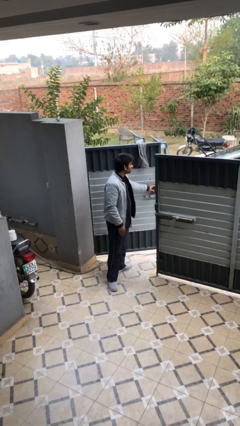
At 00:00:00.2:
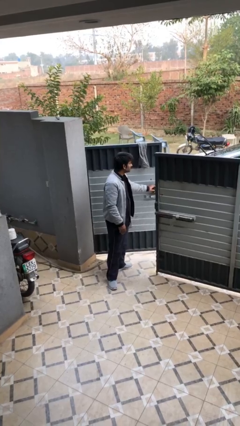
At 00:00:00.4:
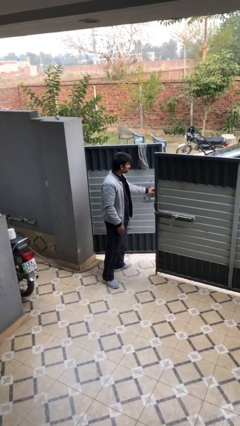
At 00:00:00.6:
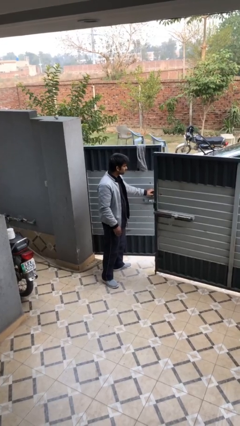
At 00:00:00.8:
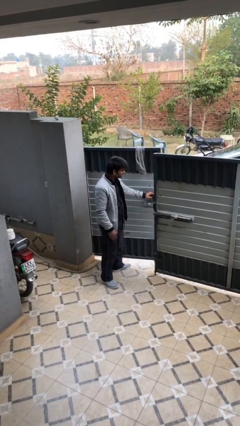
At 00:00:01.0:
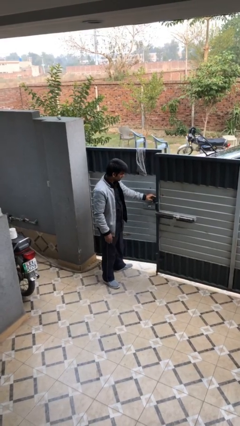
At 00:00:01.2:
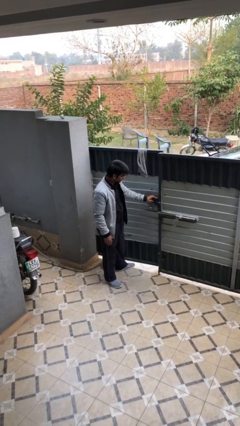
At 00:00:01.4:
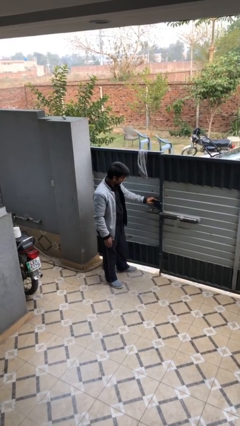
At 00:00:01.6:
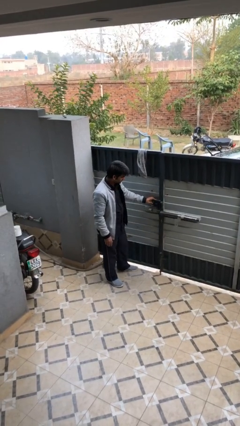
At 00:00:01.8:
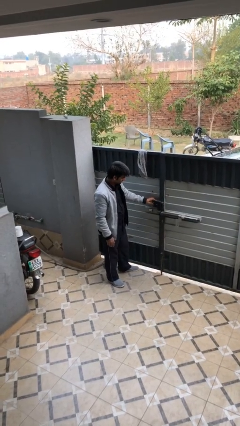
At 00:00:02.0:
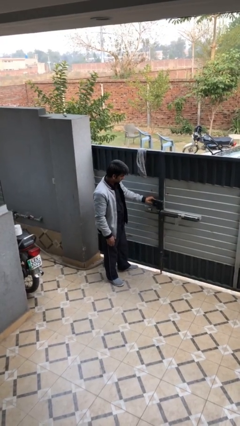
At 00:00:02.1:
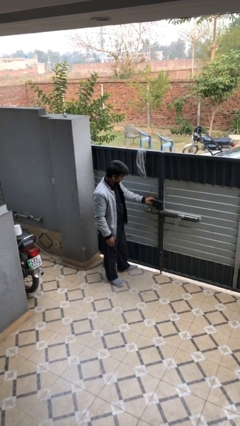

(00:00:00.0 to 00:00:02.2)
person closes facility door

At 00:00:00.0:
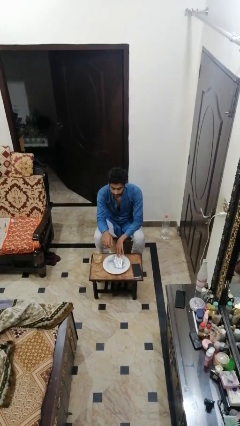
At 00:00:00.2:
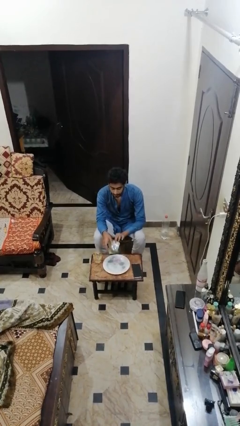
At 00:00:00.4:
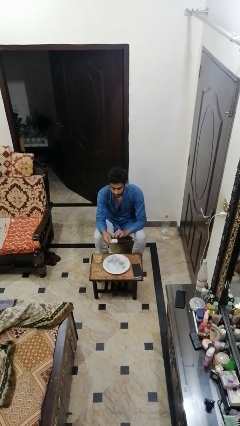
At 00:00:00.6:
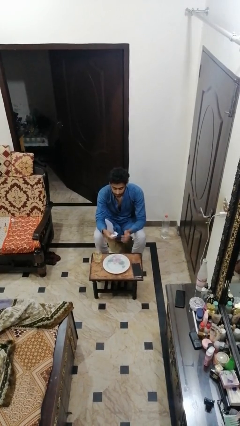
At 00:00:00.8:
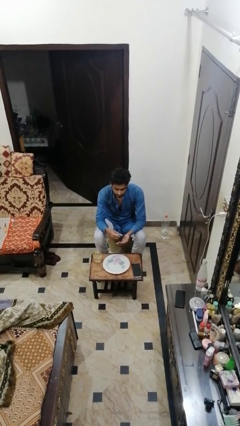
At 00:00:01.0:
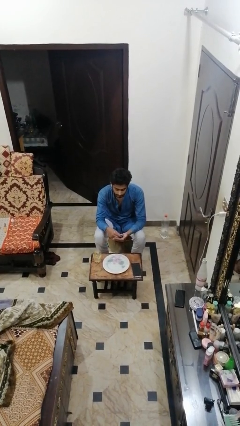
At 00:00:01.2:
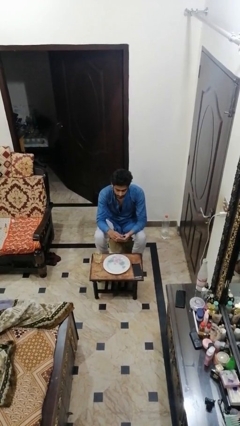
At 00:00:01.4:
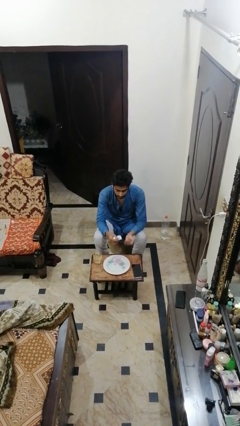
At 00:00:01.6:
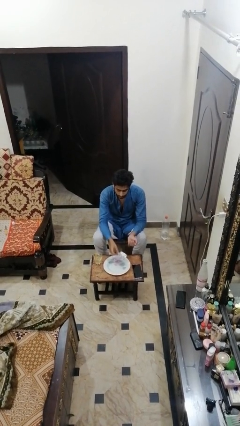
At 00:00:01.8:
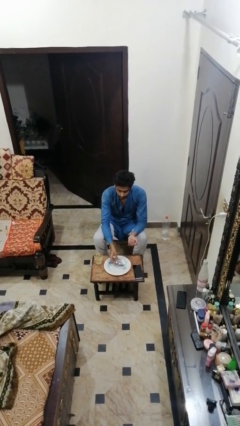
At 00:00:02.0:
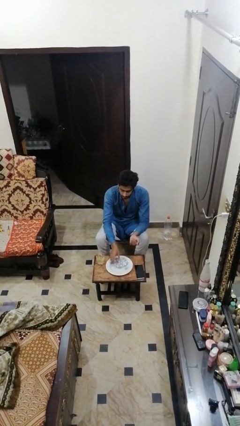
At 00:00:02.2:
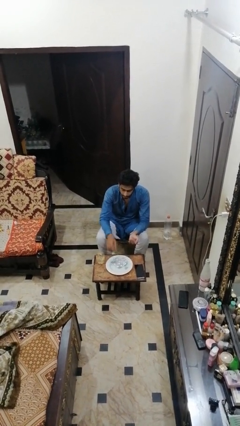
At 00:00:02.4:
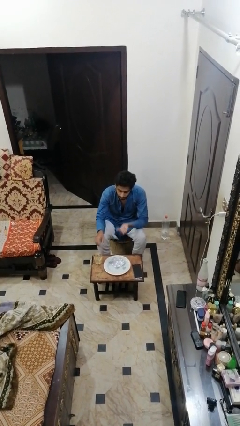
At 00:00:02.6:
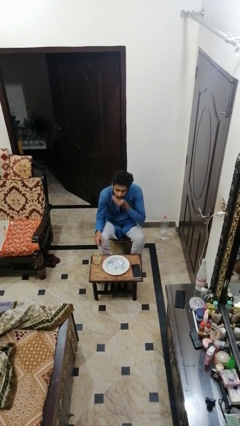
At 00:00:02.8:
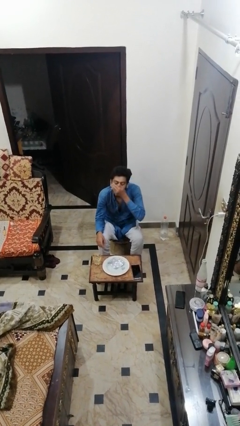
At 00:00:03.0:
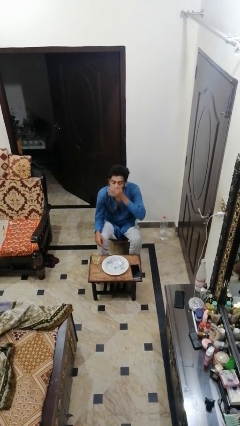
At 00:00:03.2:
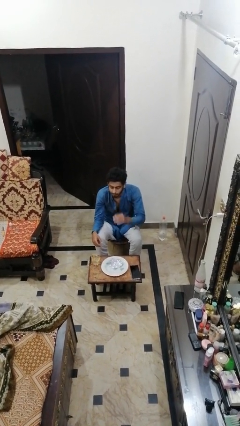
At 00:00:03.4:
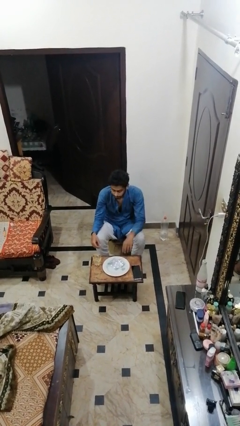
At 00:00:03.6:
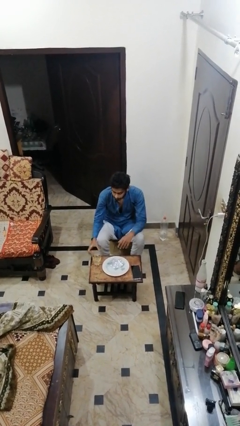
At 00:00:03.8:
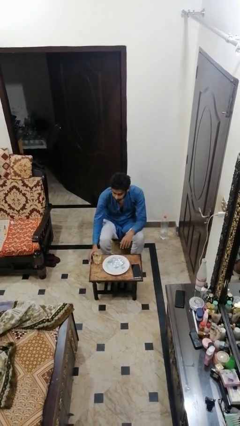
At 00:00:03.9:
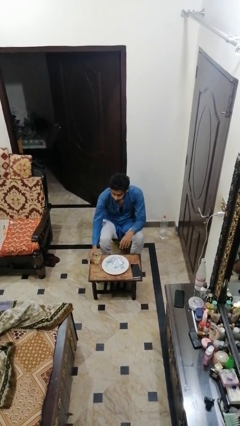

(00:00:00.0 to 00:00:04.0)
person takes medicine pills

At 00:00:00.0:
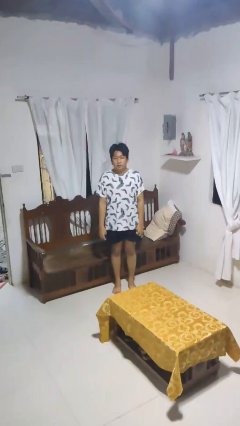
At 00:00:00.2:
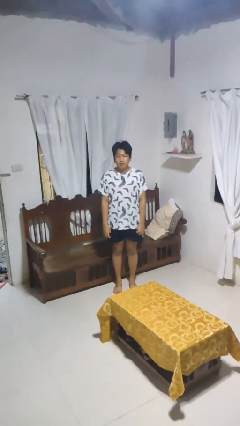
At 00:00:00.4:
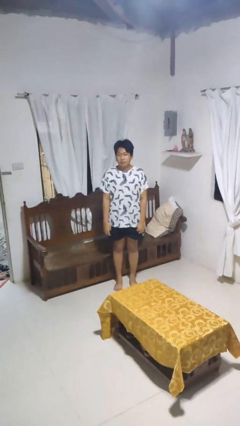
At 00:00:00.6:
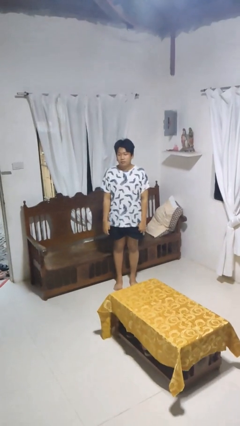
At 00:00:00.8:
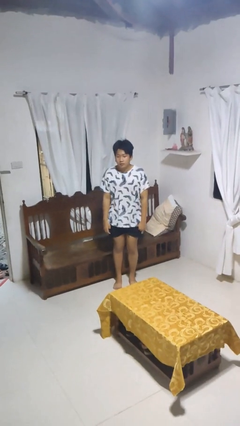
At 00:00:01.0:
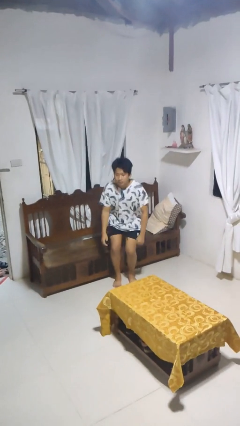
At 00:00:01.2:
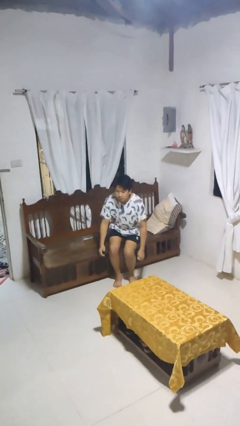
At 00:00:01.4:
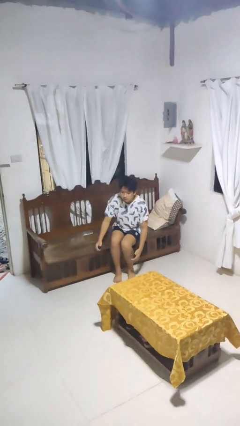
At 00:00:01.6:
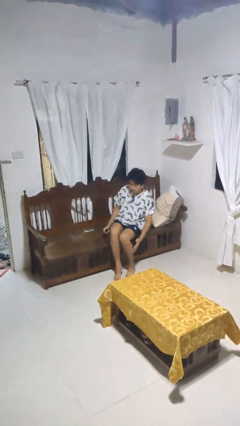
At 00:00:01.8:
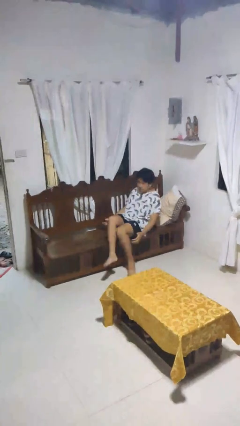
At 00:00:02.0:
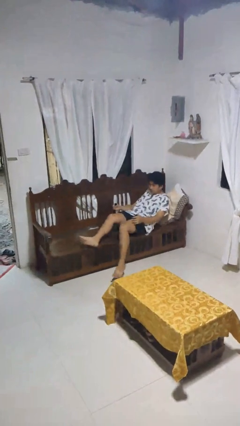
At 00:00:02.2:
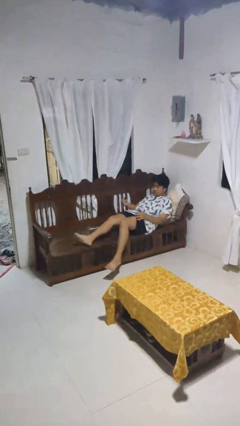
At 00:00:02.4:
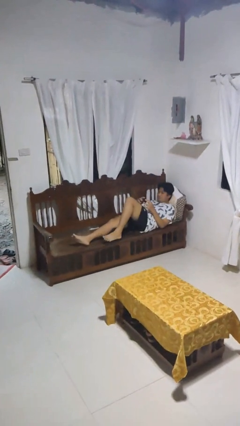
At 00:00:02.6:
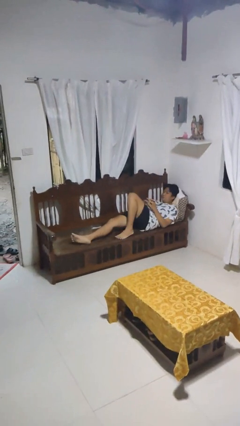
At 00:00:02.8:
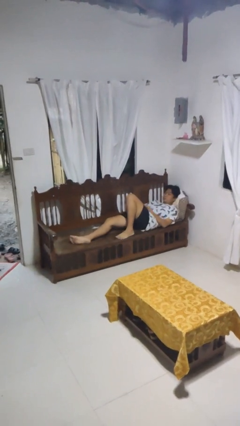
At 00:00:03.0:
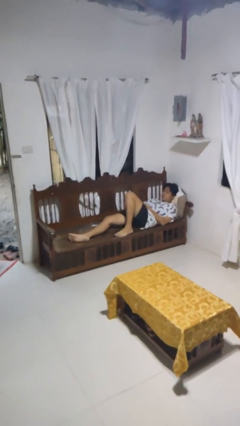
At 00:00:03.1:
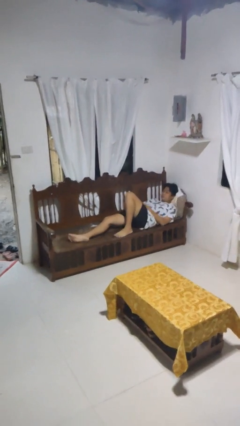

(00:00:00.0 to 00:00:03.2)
person lies down on couch

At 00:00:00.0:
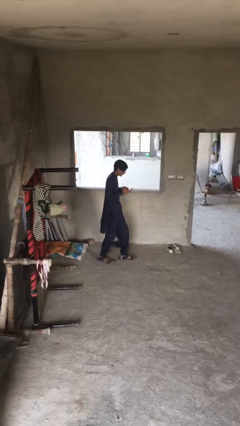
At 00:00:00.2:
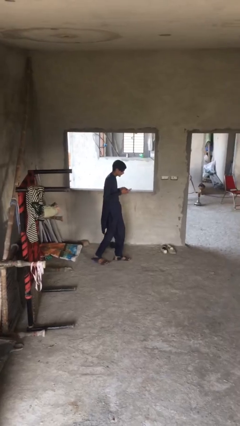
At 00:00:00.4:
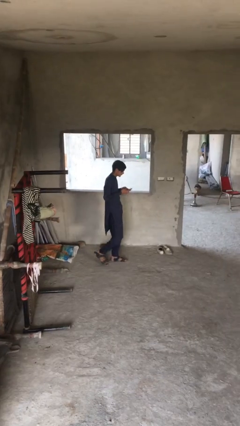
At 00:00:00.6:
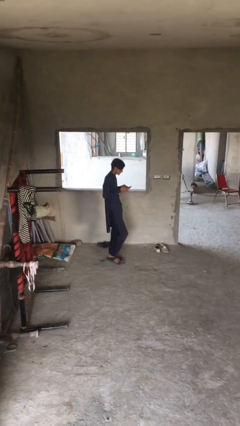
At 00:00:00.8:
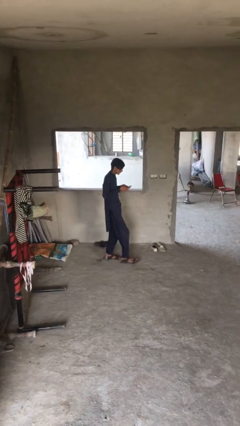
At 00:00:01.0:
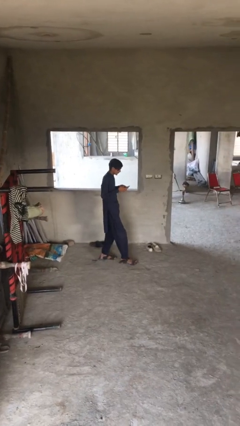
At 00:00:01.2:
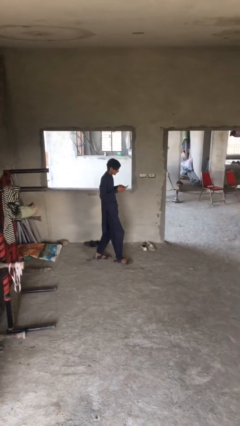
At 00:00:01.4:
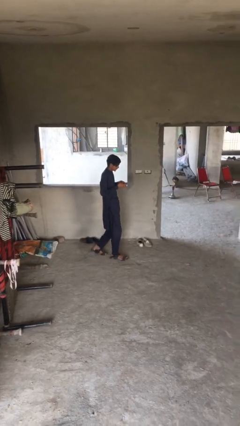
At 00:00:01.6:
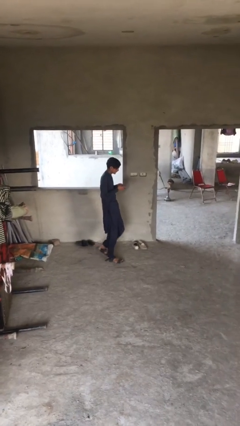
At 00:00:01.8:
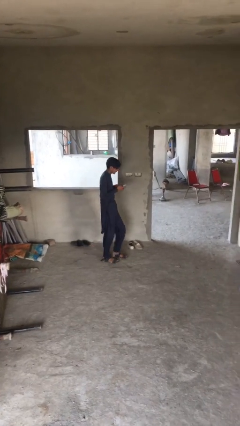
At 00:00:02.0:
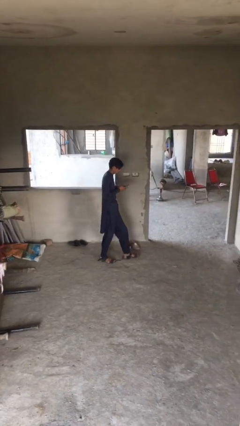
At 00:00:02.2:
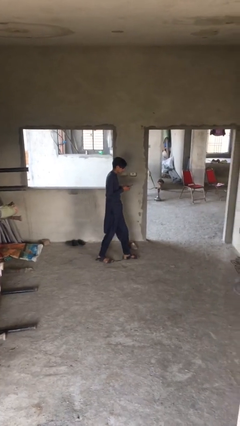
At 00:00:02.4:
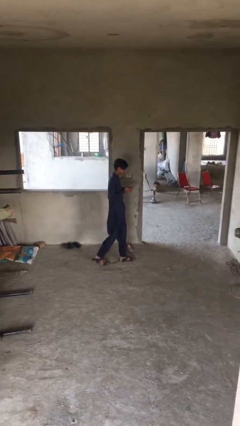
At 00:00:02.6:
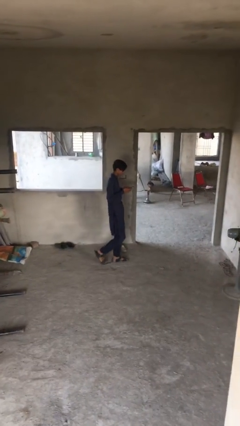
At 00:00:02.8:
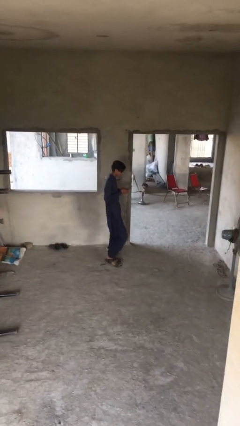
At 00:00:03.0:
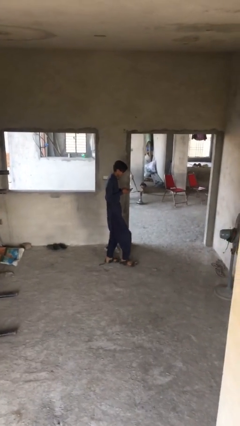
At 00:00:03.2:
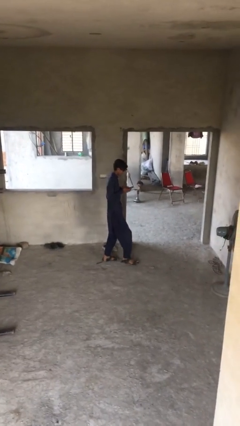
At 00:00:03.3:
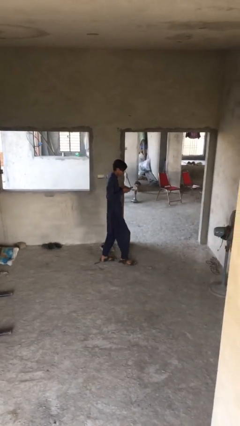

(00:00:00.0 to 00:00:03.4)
person texts on phone

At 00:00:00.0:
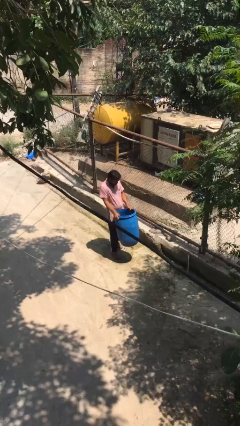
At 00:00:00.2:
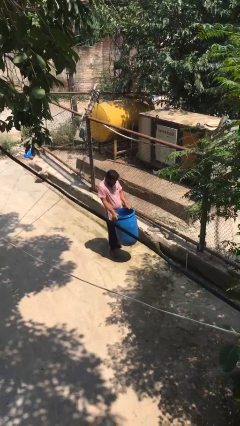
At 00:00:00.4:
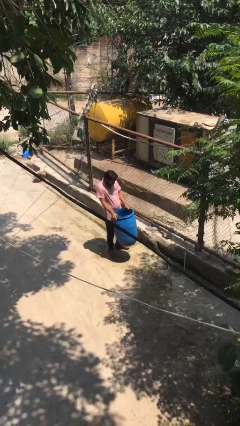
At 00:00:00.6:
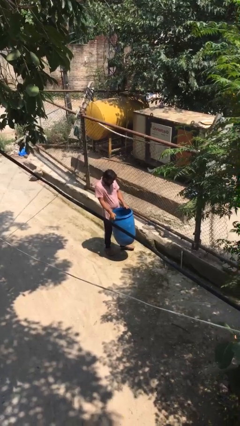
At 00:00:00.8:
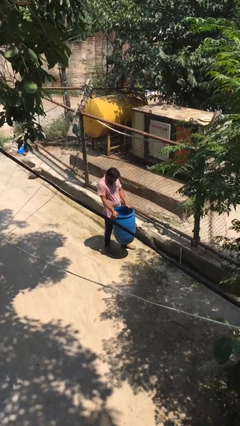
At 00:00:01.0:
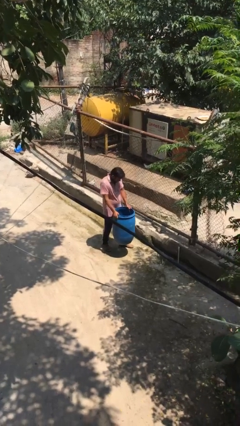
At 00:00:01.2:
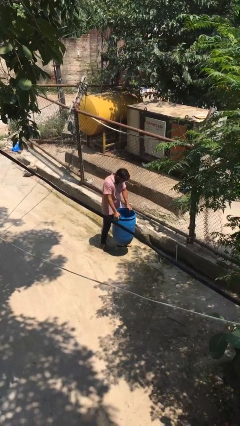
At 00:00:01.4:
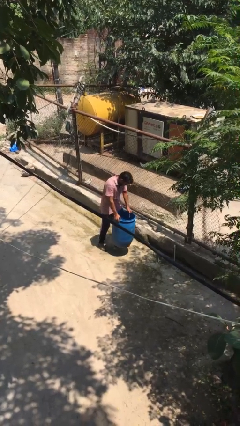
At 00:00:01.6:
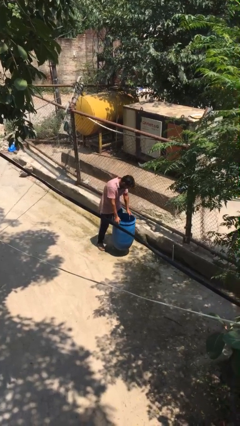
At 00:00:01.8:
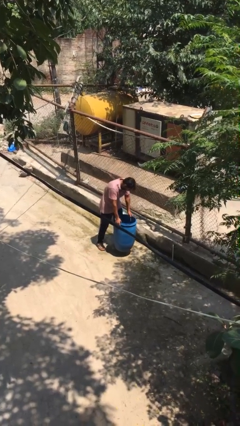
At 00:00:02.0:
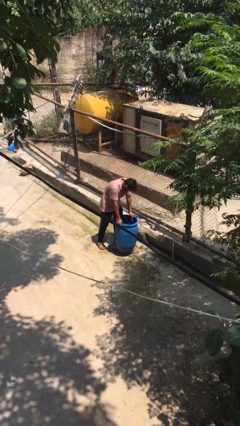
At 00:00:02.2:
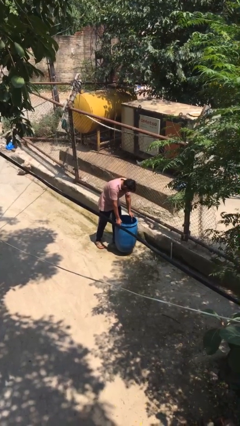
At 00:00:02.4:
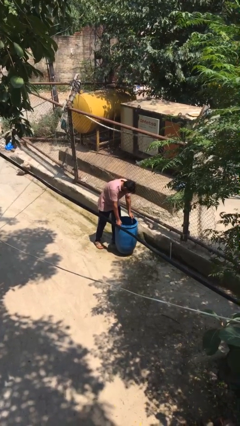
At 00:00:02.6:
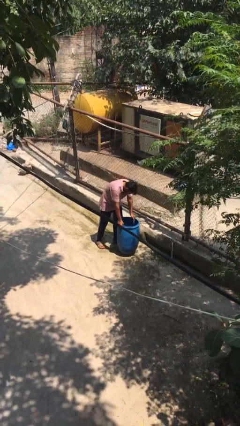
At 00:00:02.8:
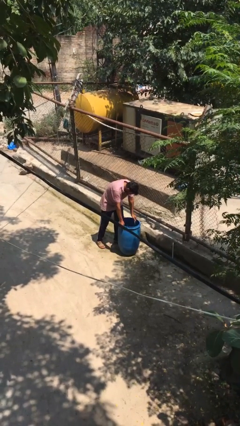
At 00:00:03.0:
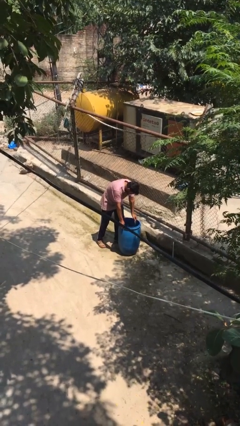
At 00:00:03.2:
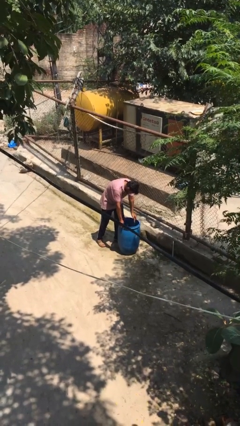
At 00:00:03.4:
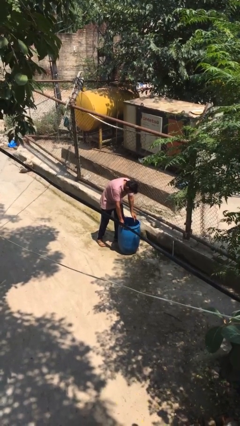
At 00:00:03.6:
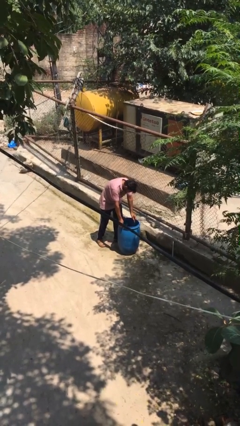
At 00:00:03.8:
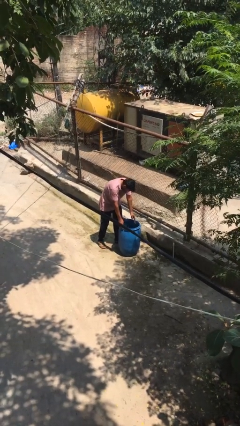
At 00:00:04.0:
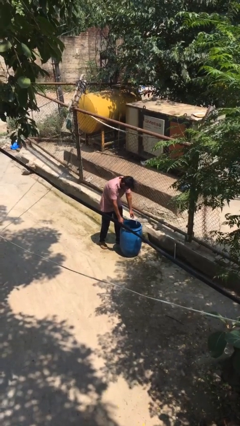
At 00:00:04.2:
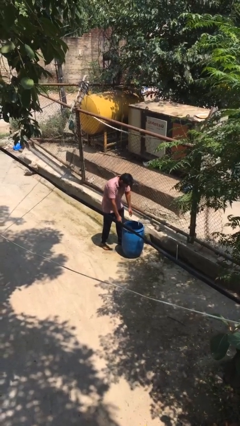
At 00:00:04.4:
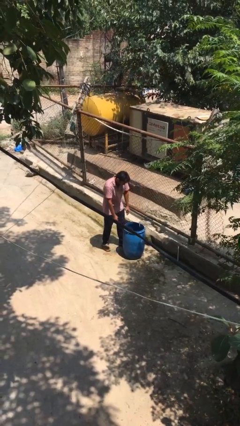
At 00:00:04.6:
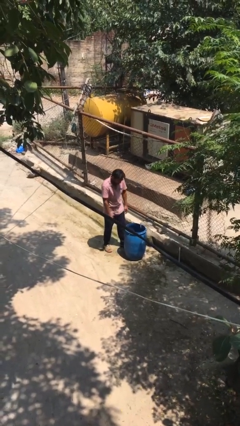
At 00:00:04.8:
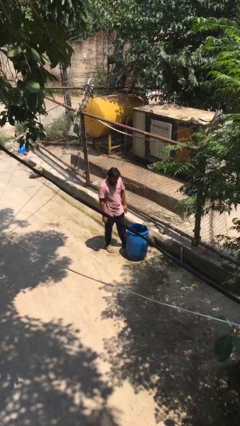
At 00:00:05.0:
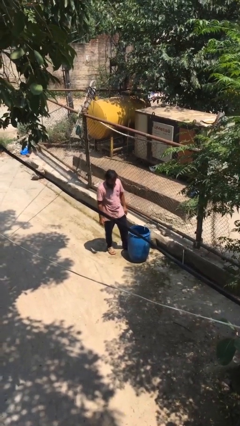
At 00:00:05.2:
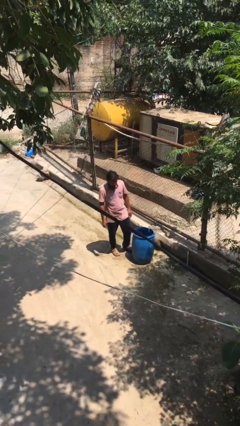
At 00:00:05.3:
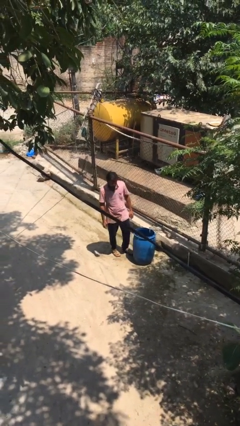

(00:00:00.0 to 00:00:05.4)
person puts down object on floor
